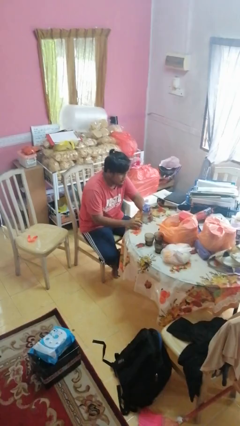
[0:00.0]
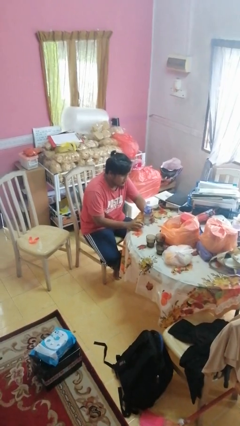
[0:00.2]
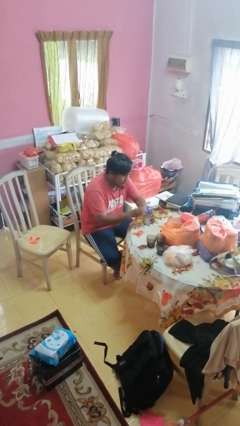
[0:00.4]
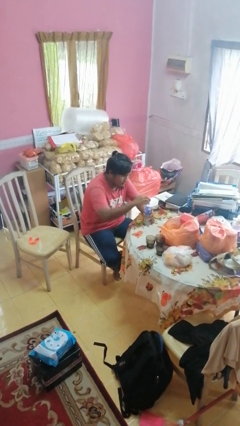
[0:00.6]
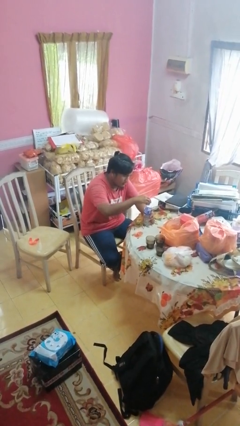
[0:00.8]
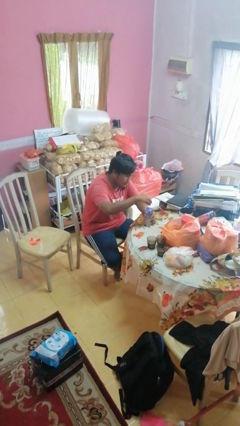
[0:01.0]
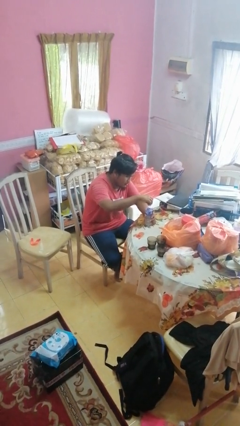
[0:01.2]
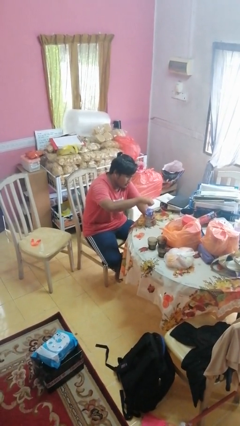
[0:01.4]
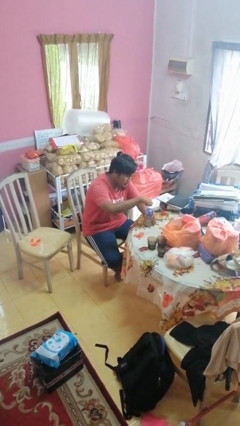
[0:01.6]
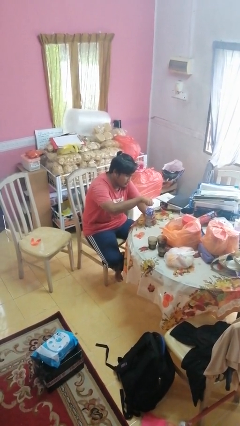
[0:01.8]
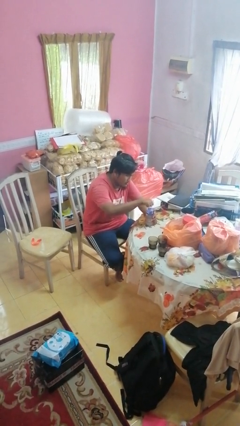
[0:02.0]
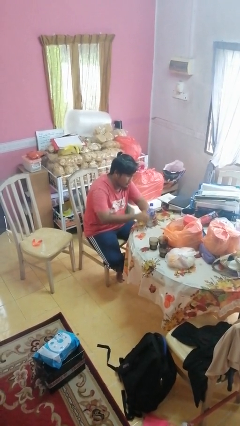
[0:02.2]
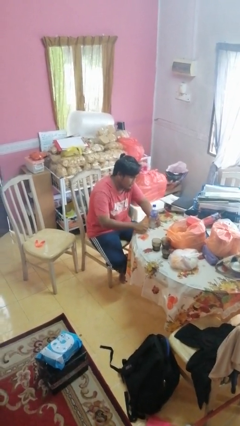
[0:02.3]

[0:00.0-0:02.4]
person screws lid to bottle

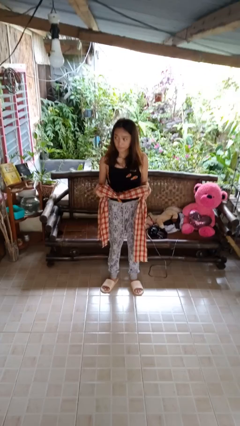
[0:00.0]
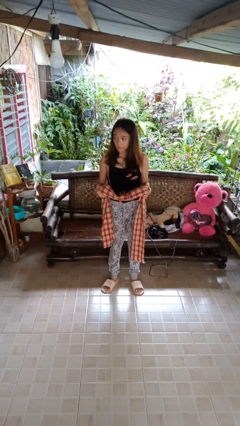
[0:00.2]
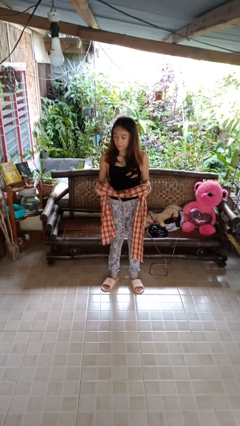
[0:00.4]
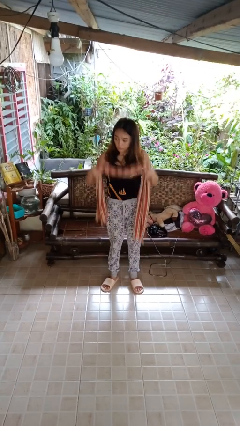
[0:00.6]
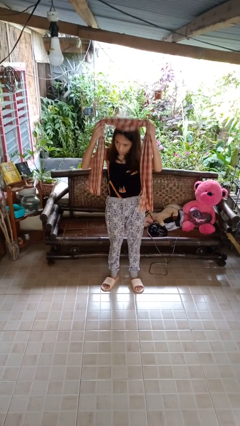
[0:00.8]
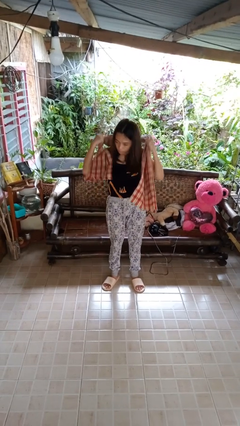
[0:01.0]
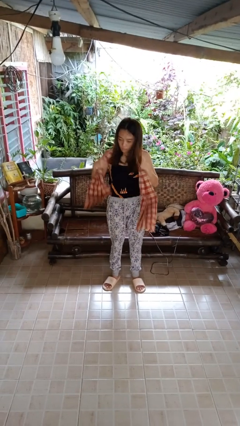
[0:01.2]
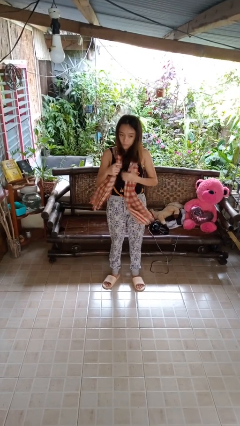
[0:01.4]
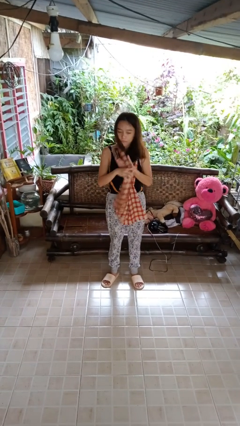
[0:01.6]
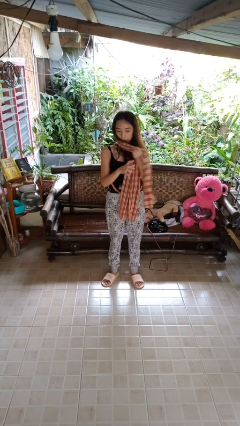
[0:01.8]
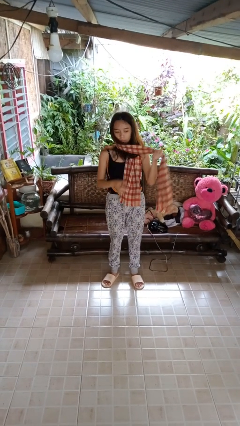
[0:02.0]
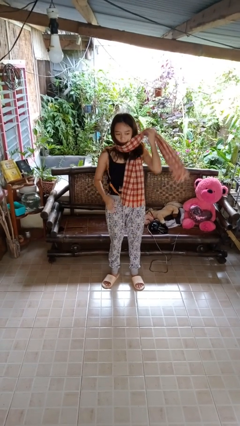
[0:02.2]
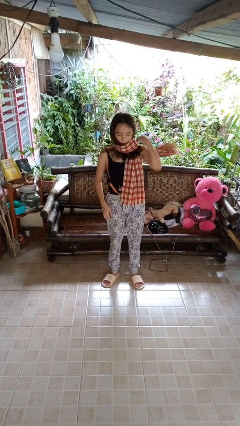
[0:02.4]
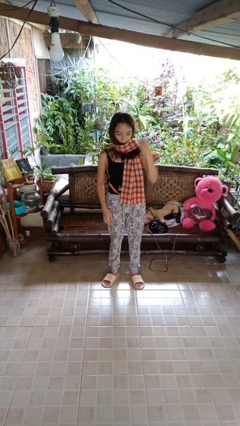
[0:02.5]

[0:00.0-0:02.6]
person puts on scarf

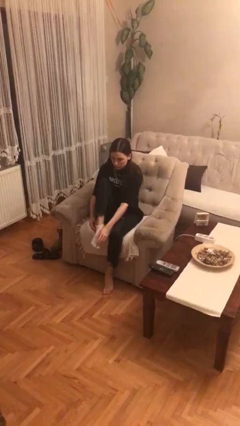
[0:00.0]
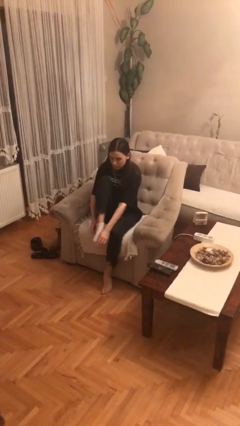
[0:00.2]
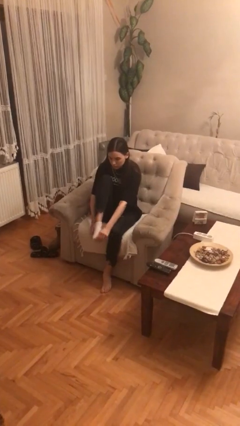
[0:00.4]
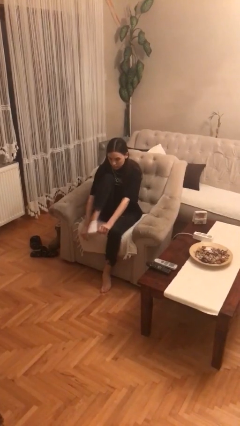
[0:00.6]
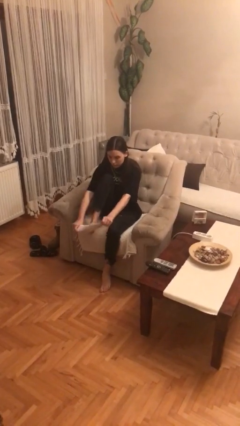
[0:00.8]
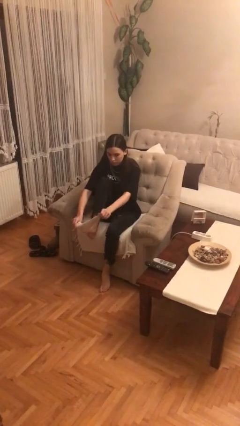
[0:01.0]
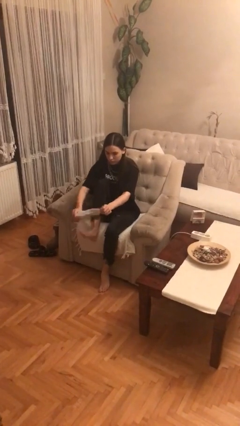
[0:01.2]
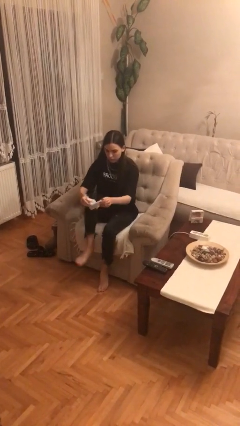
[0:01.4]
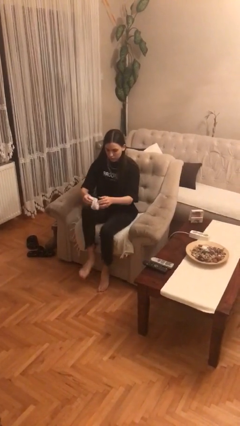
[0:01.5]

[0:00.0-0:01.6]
person takes off socks

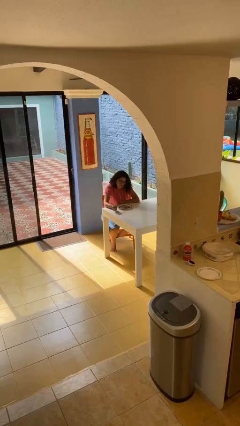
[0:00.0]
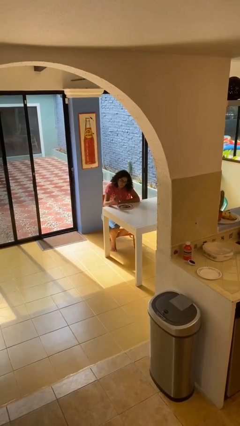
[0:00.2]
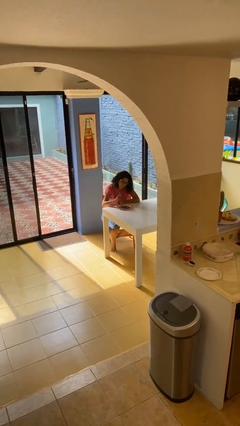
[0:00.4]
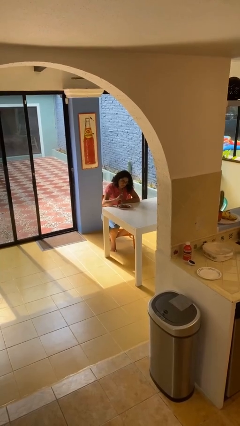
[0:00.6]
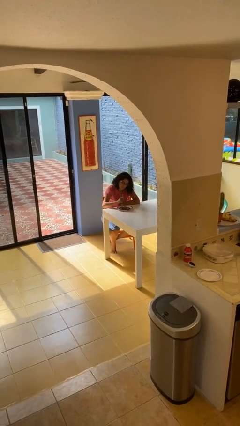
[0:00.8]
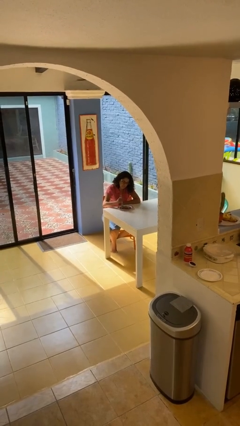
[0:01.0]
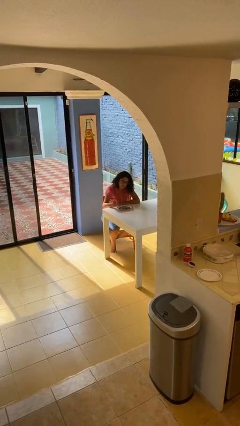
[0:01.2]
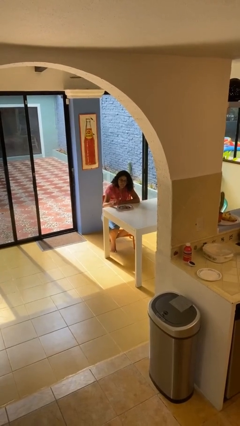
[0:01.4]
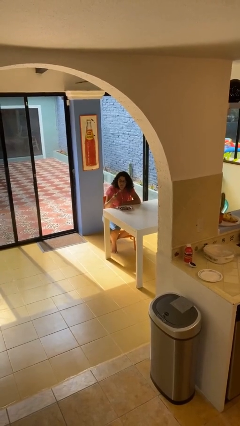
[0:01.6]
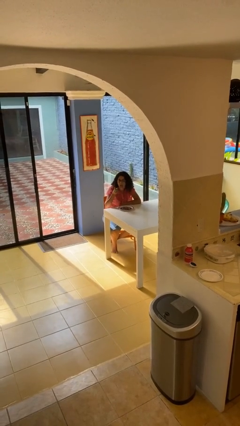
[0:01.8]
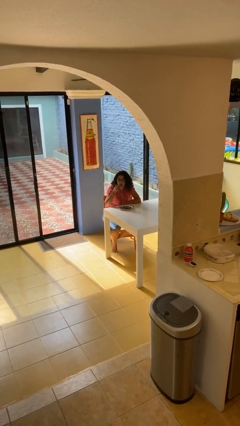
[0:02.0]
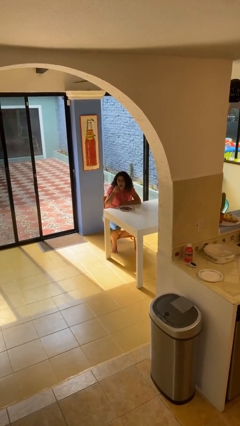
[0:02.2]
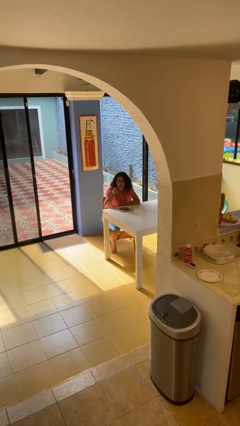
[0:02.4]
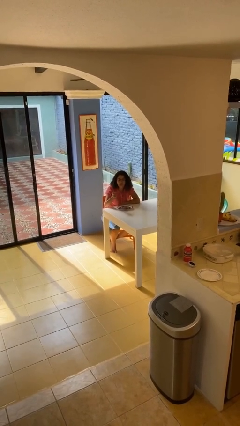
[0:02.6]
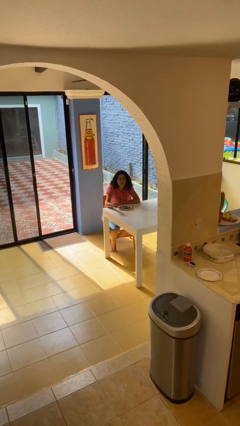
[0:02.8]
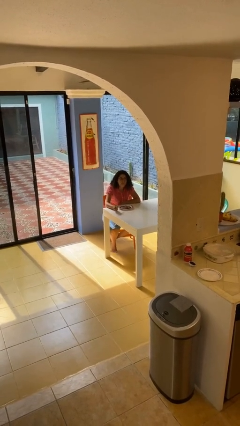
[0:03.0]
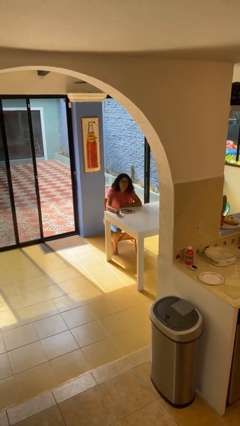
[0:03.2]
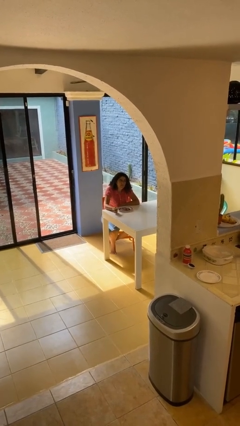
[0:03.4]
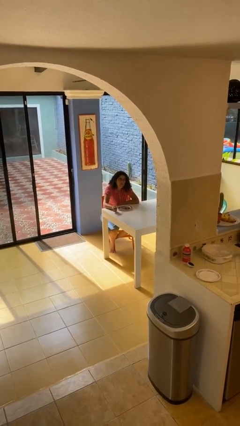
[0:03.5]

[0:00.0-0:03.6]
person eats with utensil

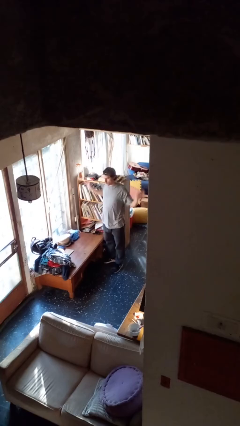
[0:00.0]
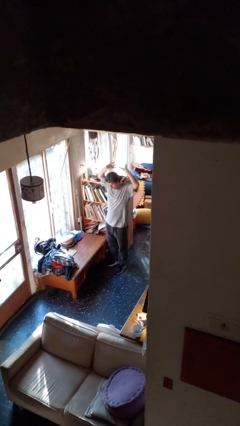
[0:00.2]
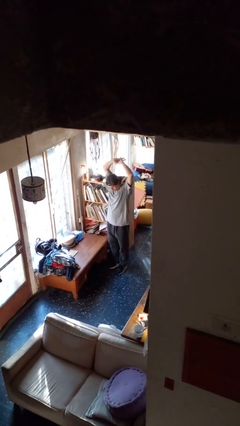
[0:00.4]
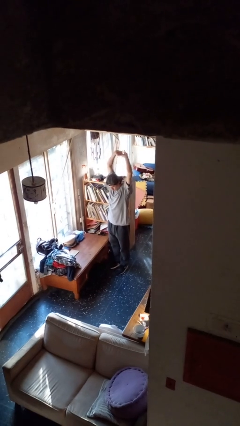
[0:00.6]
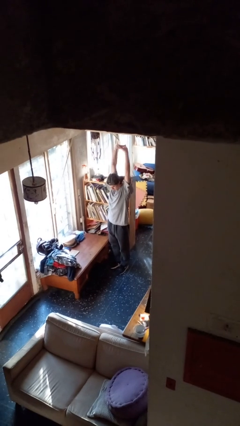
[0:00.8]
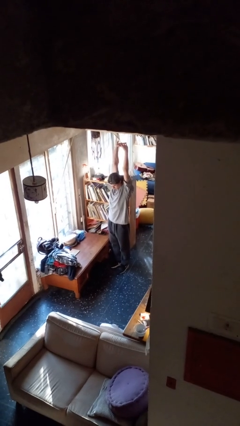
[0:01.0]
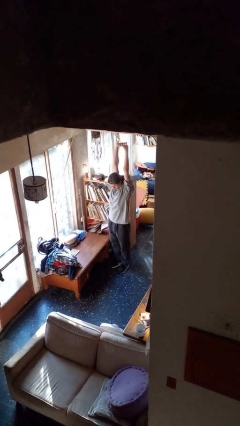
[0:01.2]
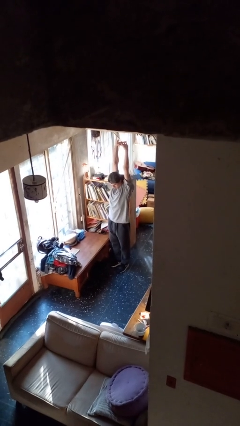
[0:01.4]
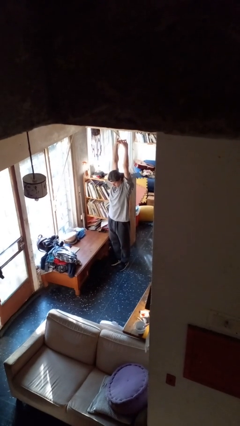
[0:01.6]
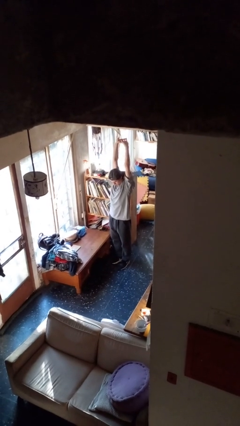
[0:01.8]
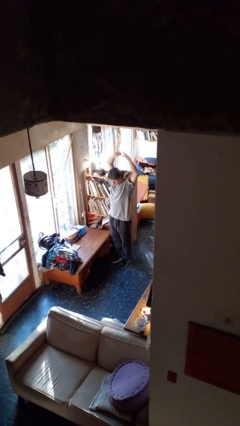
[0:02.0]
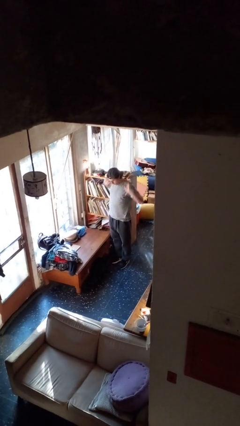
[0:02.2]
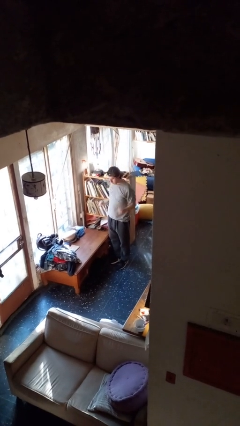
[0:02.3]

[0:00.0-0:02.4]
person stretches arms over head

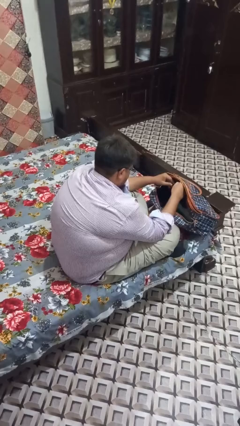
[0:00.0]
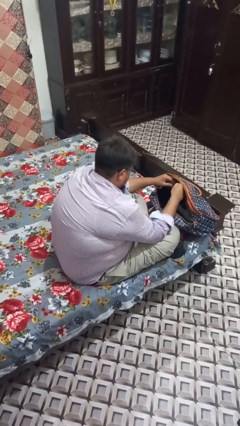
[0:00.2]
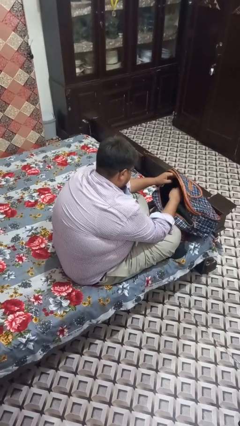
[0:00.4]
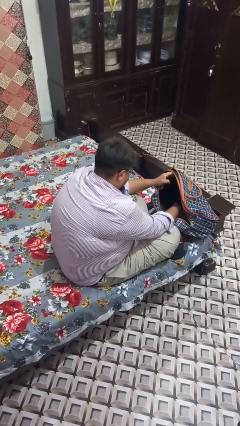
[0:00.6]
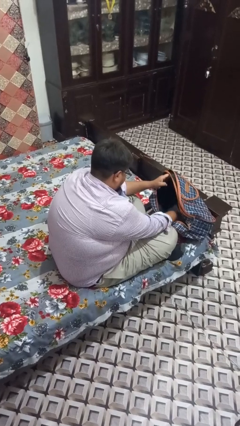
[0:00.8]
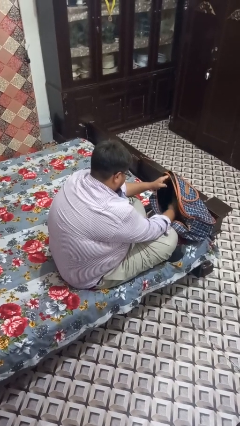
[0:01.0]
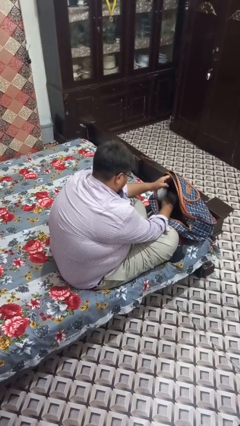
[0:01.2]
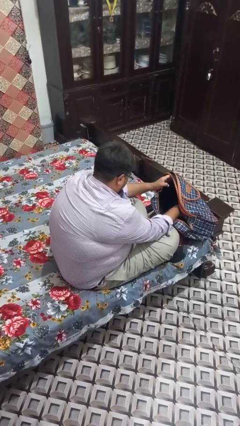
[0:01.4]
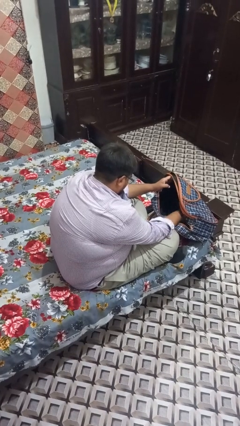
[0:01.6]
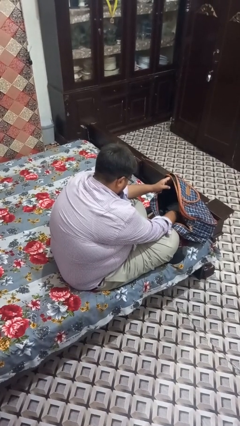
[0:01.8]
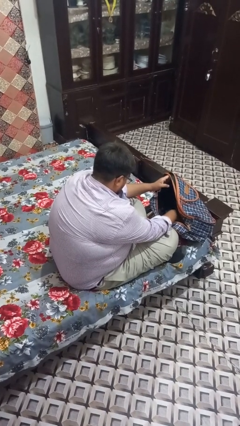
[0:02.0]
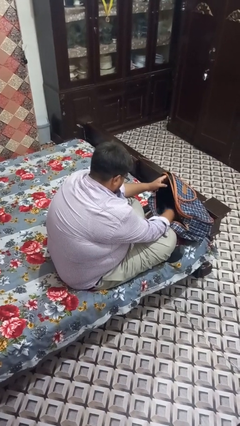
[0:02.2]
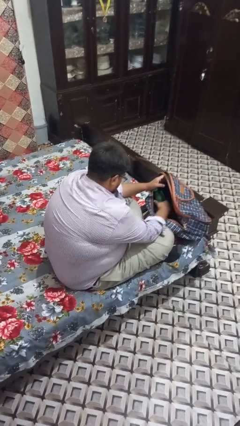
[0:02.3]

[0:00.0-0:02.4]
person searches in backpack

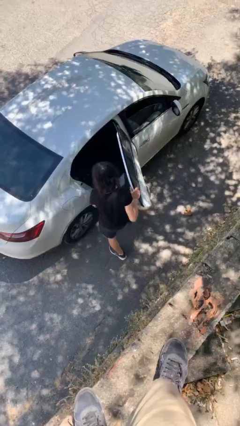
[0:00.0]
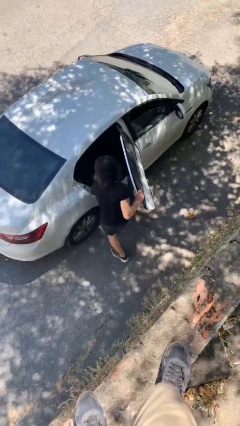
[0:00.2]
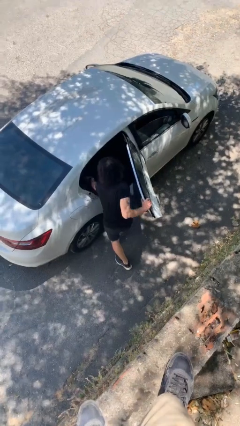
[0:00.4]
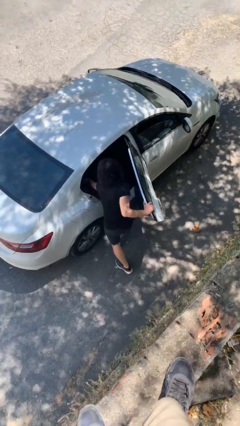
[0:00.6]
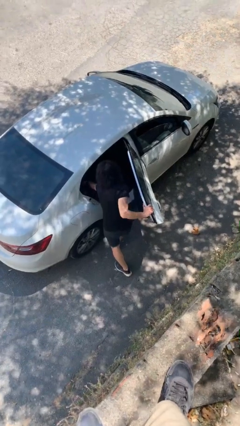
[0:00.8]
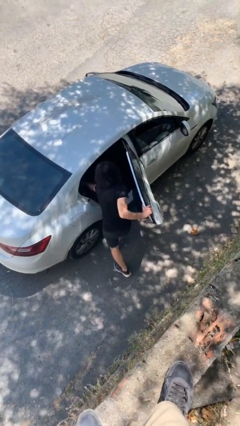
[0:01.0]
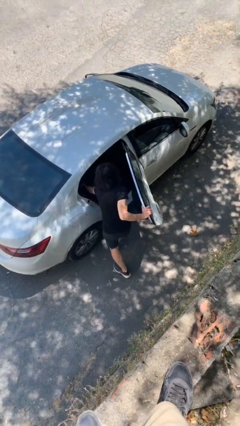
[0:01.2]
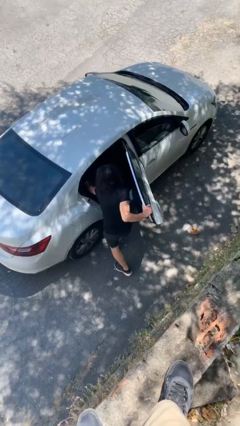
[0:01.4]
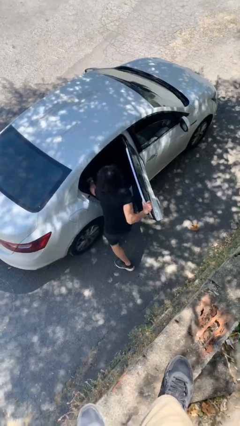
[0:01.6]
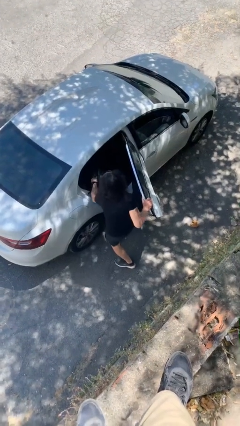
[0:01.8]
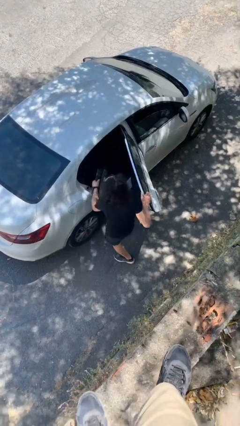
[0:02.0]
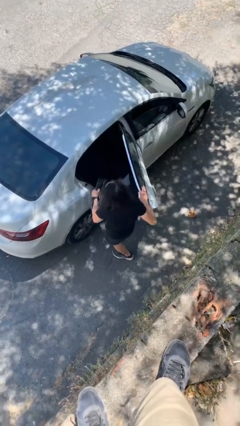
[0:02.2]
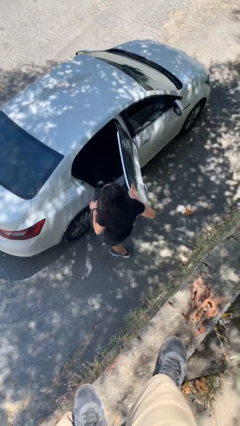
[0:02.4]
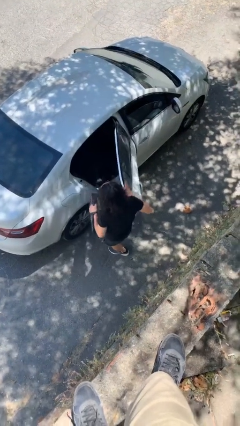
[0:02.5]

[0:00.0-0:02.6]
person unloads car
